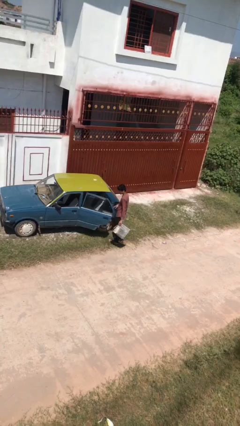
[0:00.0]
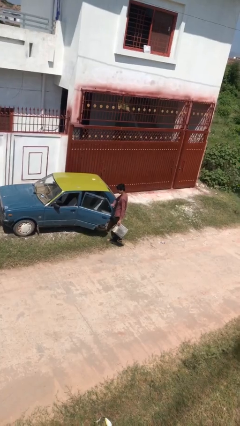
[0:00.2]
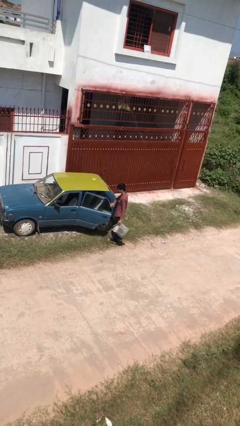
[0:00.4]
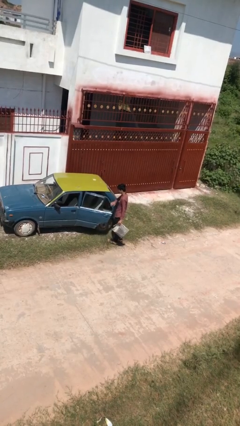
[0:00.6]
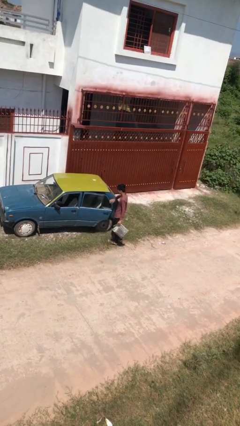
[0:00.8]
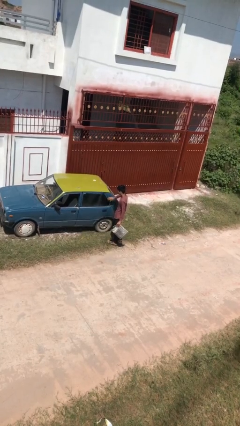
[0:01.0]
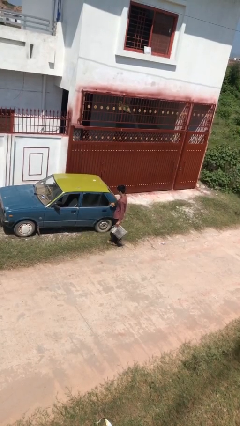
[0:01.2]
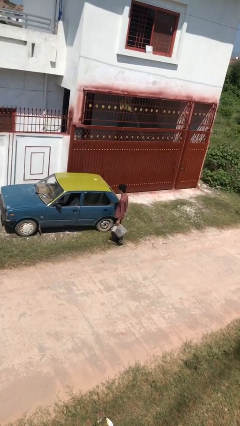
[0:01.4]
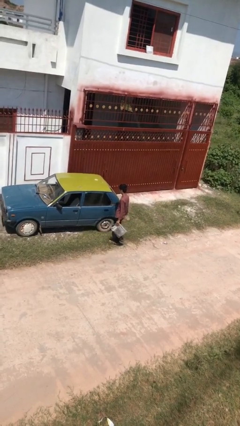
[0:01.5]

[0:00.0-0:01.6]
person closes car door

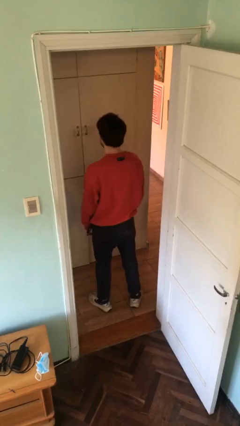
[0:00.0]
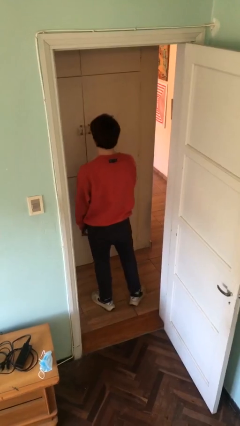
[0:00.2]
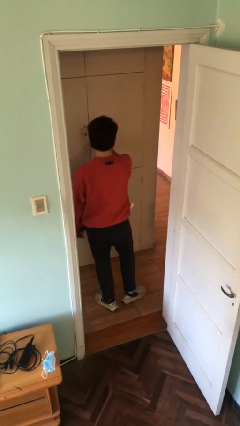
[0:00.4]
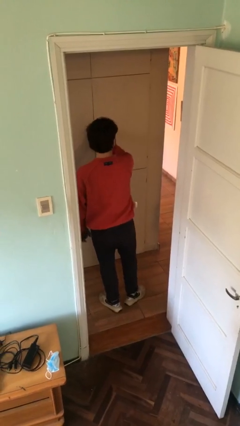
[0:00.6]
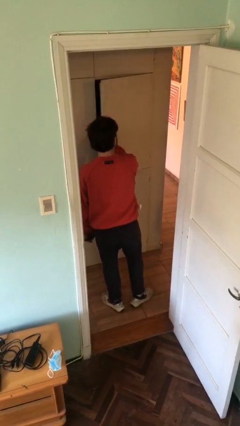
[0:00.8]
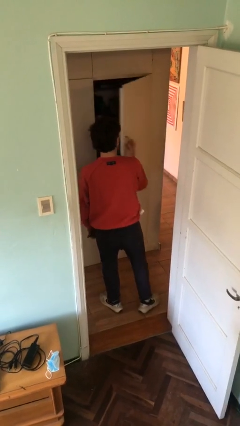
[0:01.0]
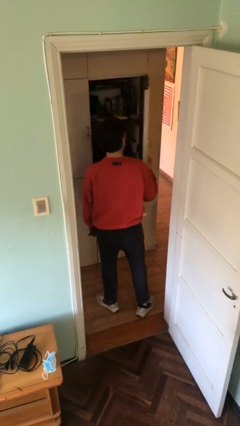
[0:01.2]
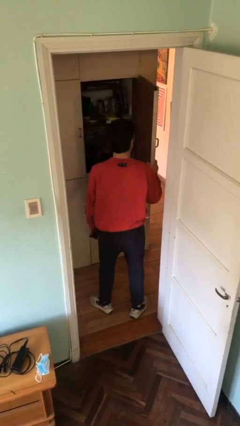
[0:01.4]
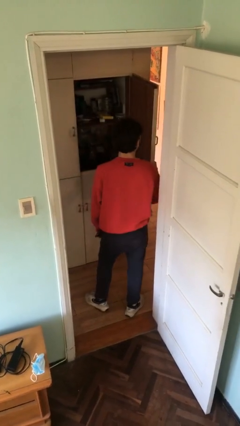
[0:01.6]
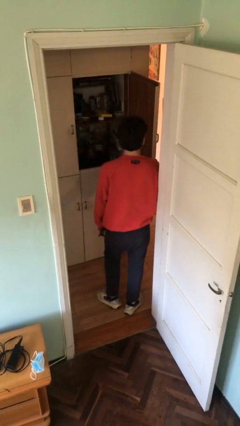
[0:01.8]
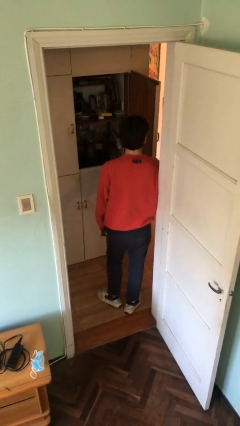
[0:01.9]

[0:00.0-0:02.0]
person opens closet door

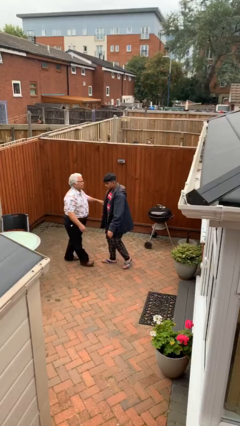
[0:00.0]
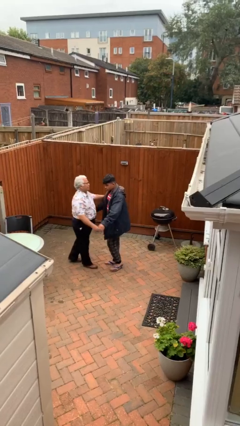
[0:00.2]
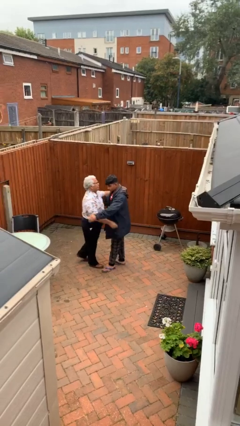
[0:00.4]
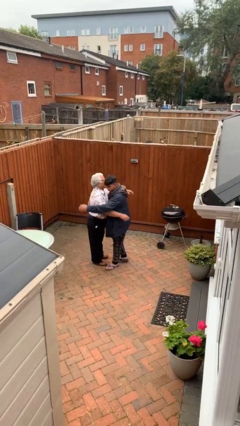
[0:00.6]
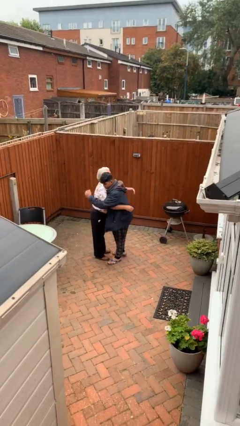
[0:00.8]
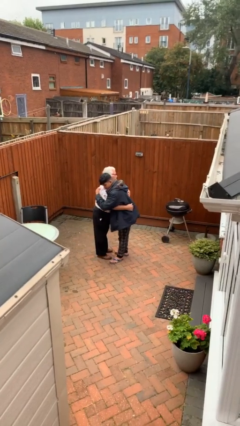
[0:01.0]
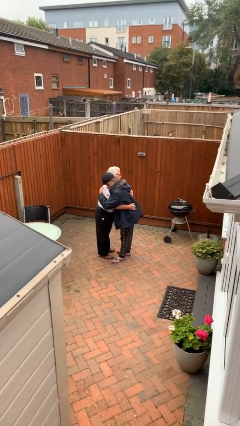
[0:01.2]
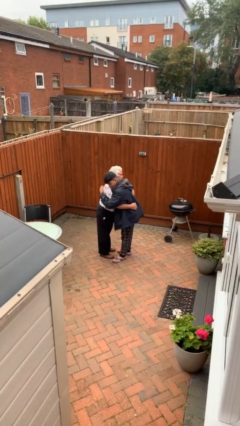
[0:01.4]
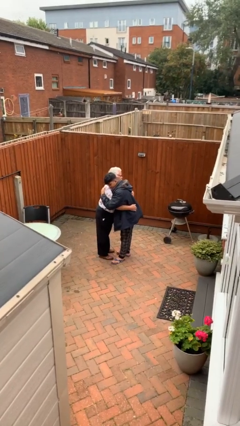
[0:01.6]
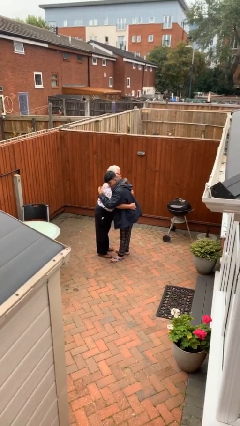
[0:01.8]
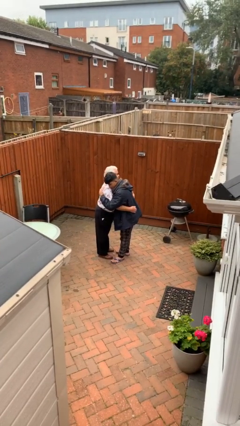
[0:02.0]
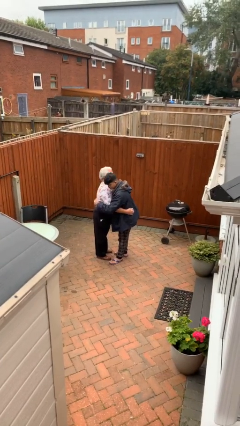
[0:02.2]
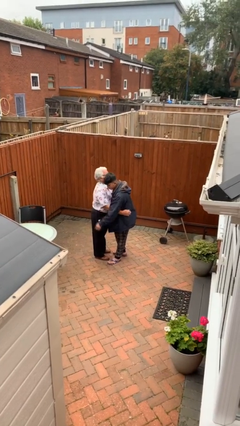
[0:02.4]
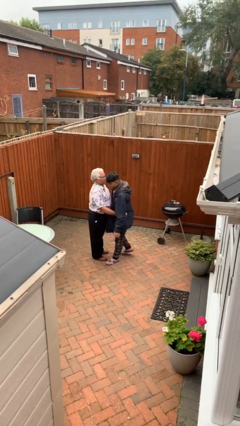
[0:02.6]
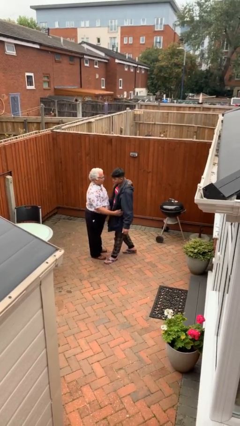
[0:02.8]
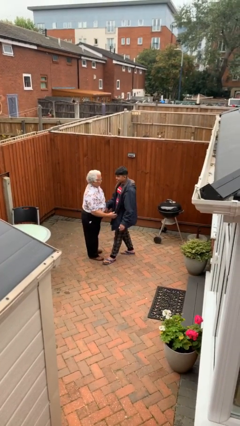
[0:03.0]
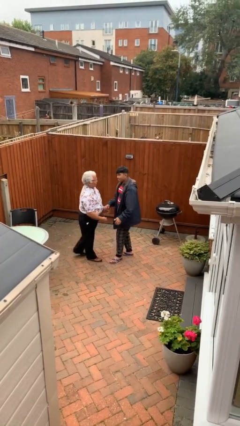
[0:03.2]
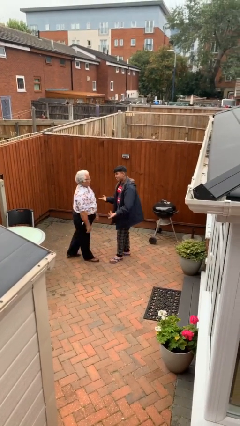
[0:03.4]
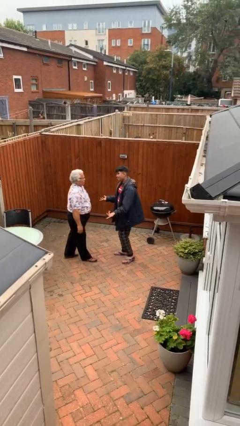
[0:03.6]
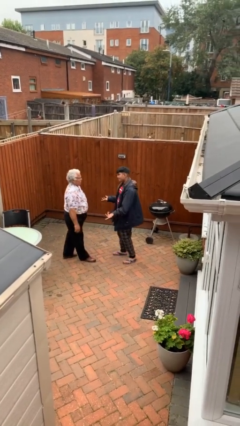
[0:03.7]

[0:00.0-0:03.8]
person embraces person

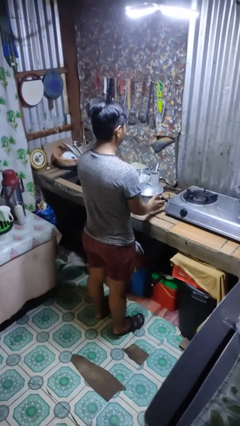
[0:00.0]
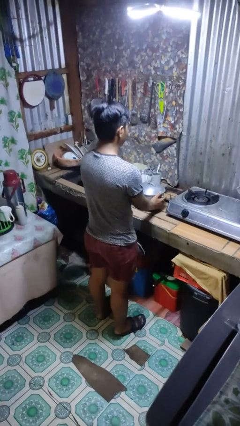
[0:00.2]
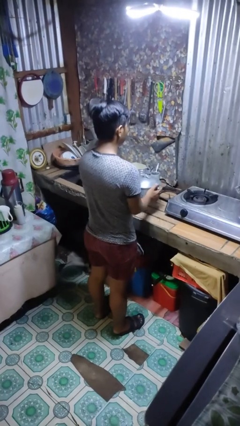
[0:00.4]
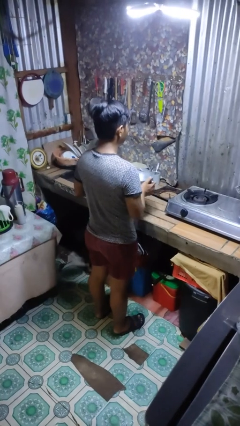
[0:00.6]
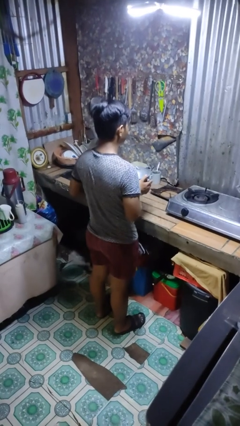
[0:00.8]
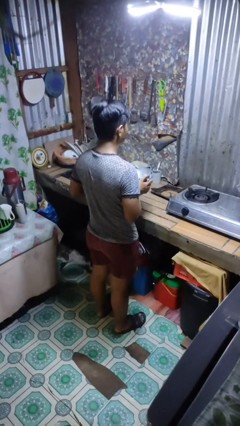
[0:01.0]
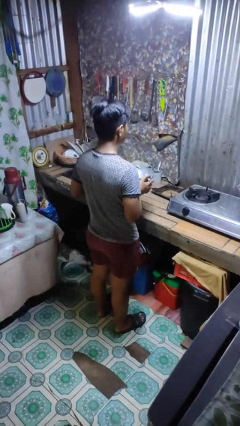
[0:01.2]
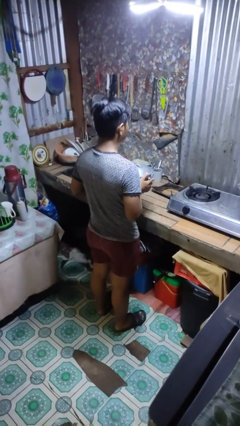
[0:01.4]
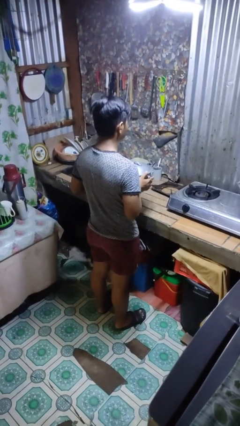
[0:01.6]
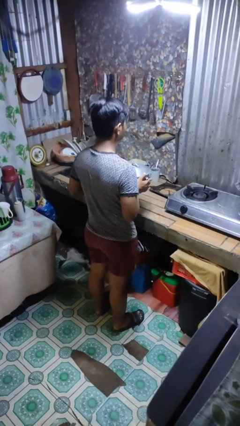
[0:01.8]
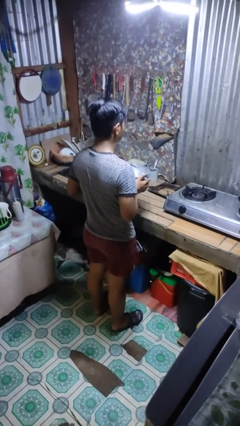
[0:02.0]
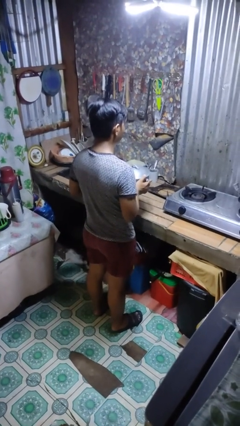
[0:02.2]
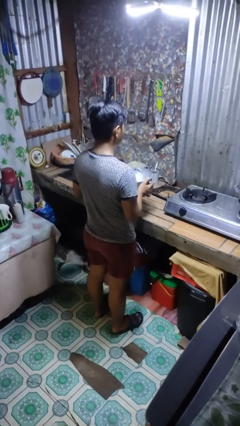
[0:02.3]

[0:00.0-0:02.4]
person picks up object from countertop

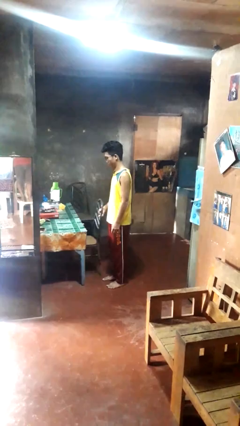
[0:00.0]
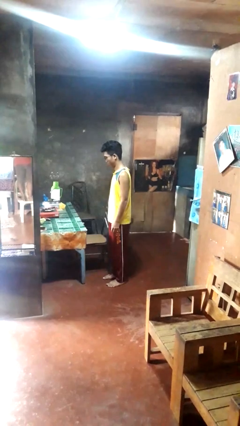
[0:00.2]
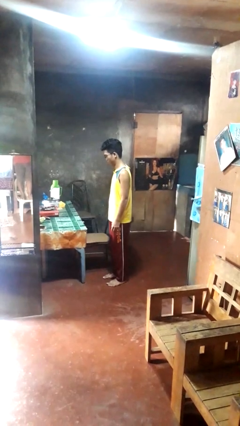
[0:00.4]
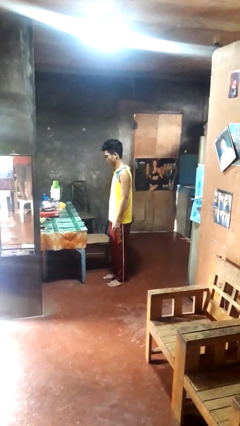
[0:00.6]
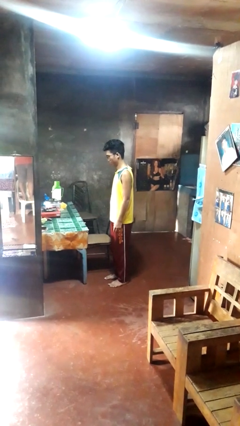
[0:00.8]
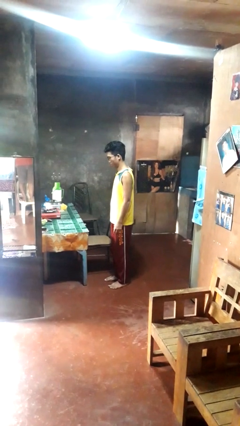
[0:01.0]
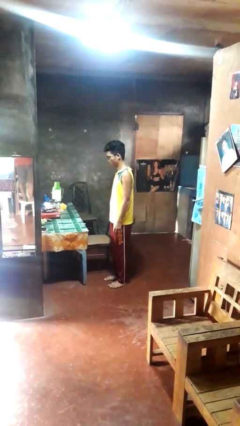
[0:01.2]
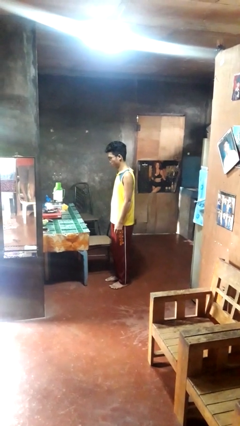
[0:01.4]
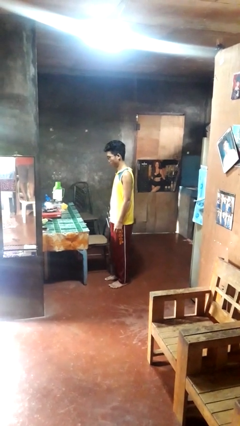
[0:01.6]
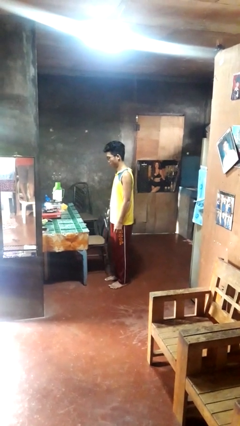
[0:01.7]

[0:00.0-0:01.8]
person pulls out chair

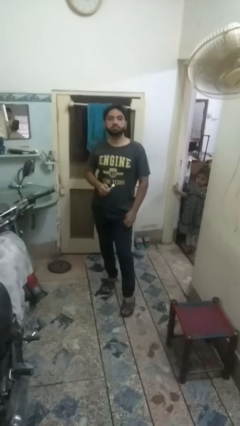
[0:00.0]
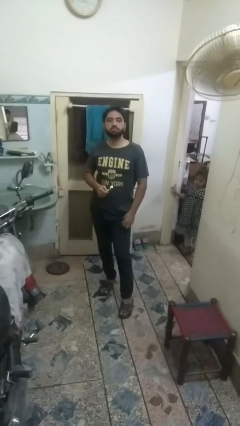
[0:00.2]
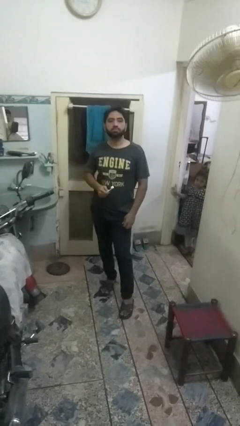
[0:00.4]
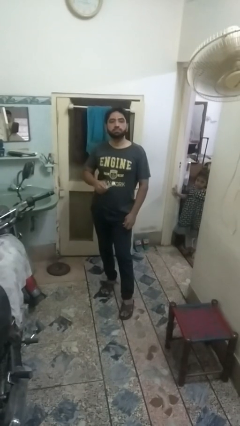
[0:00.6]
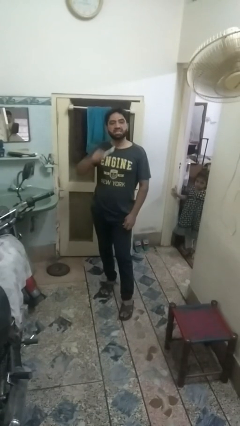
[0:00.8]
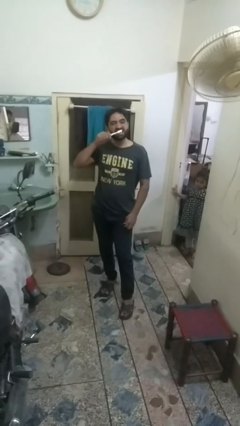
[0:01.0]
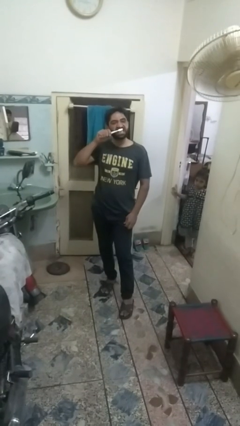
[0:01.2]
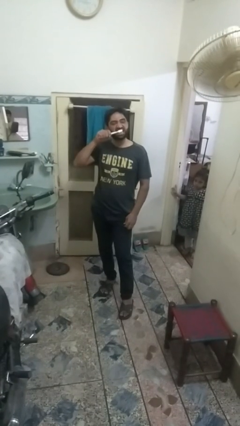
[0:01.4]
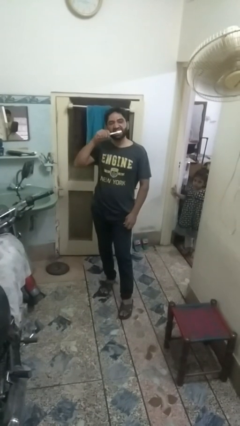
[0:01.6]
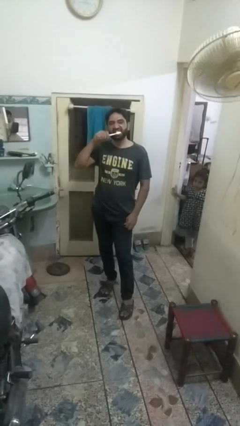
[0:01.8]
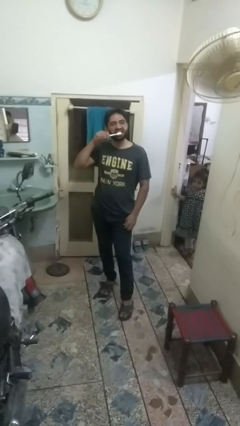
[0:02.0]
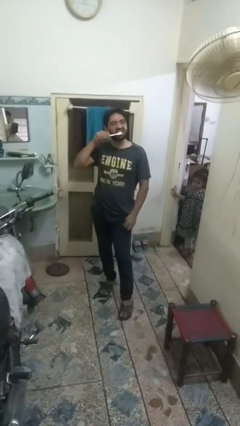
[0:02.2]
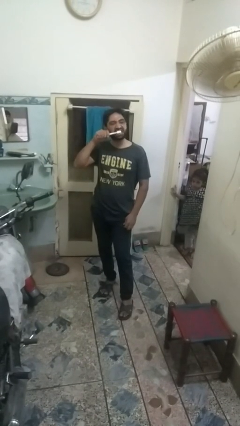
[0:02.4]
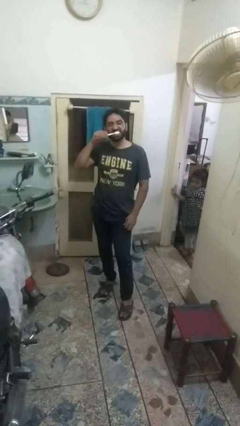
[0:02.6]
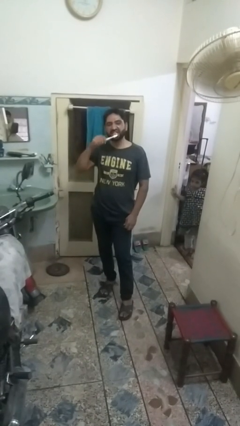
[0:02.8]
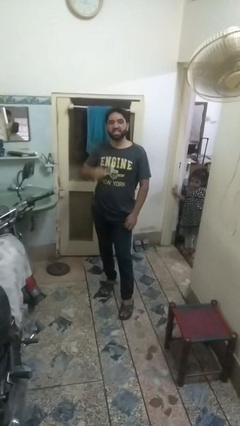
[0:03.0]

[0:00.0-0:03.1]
person brushes teeth

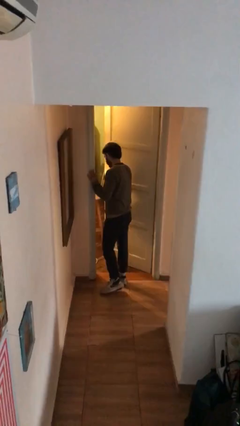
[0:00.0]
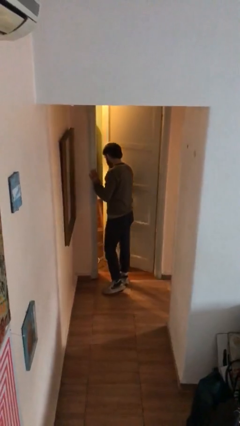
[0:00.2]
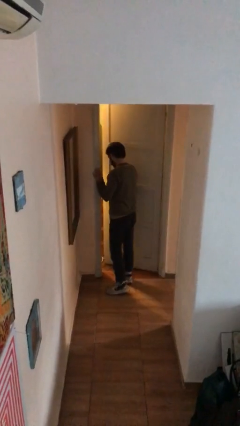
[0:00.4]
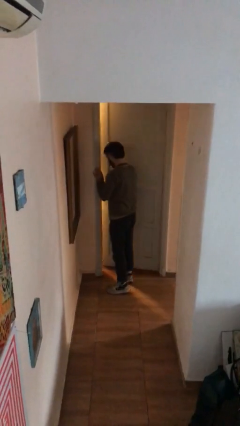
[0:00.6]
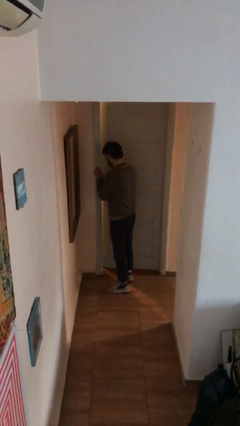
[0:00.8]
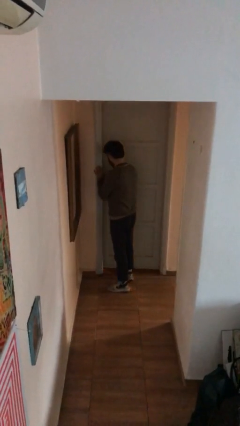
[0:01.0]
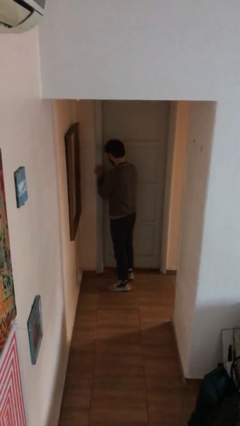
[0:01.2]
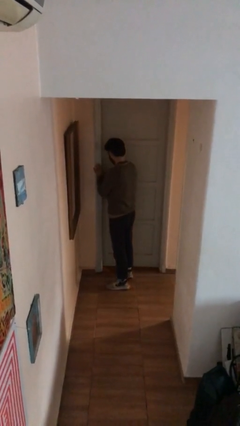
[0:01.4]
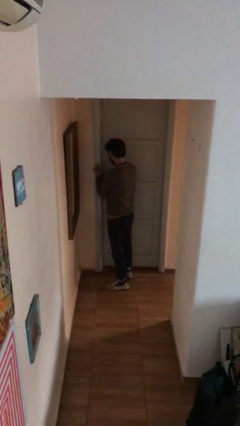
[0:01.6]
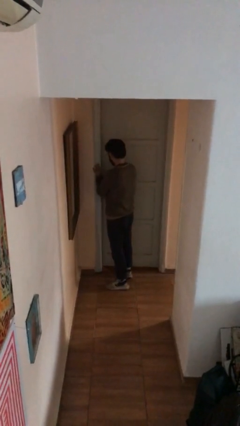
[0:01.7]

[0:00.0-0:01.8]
person closes facility door

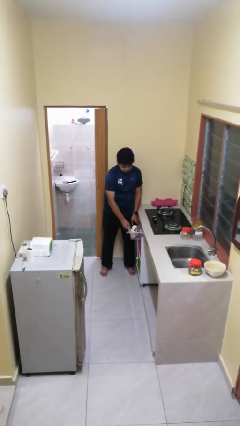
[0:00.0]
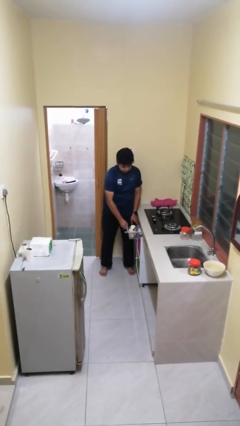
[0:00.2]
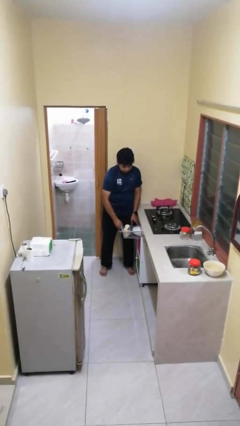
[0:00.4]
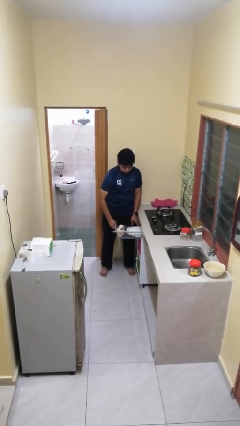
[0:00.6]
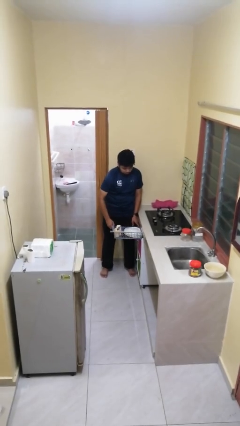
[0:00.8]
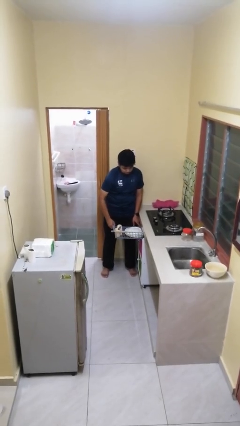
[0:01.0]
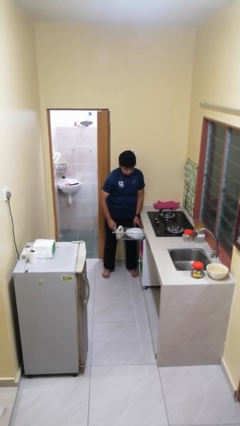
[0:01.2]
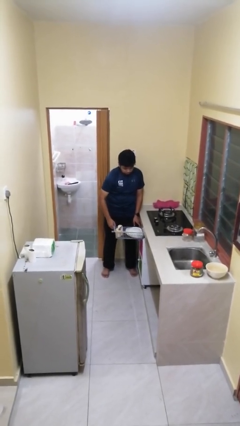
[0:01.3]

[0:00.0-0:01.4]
person opens kitchen drawer
